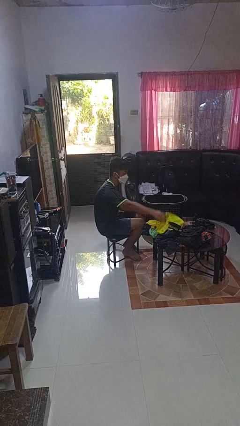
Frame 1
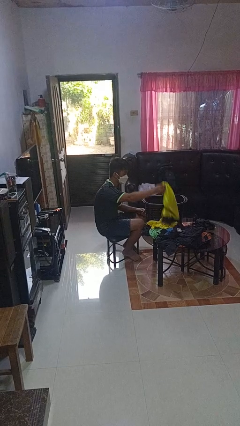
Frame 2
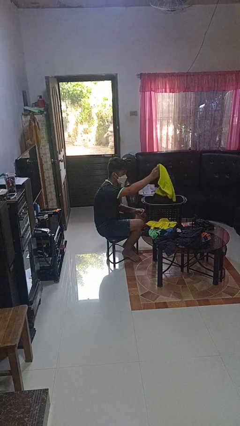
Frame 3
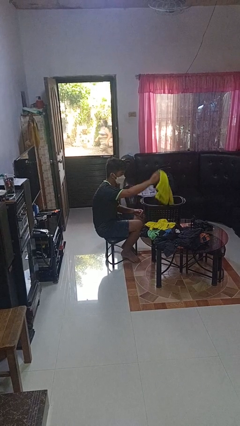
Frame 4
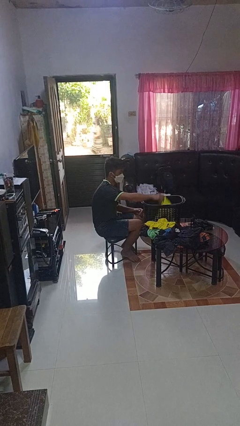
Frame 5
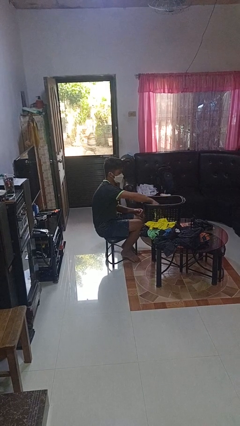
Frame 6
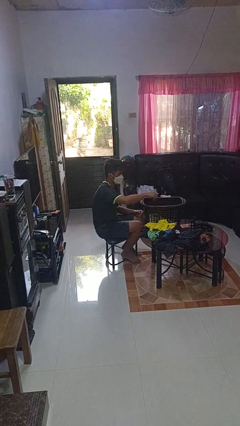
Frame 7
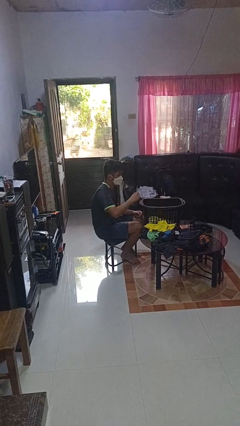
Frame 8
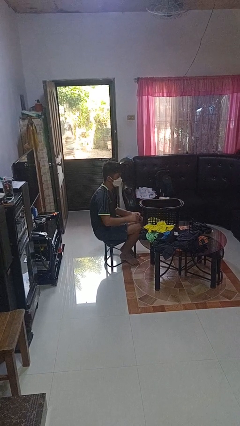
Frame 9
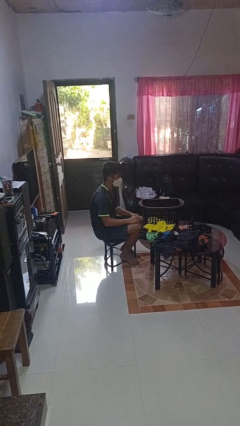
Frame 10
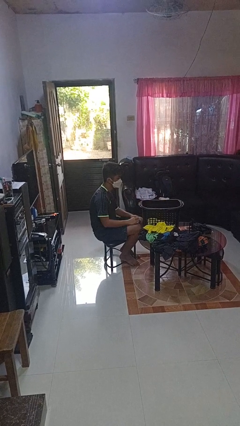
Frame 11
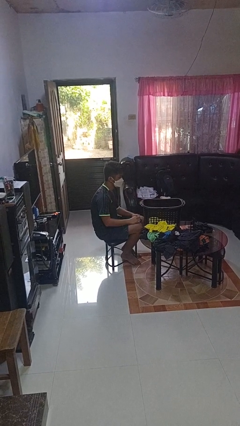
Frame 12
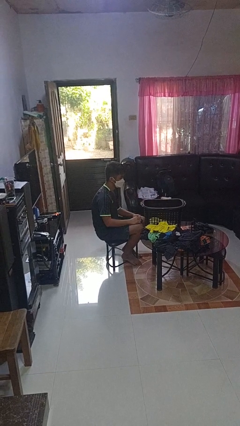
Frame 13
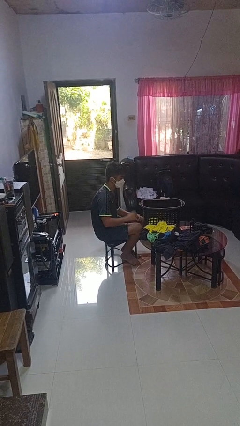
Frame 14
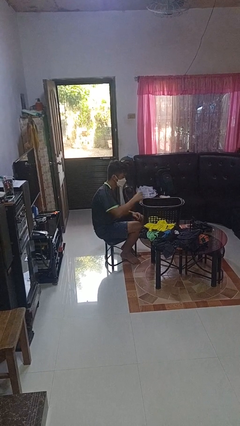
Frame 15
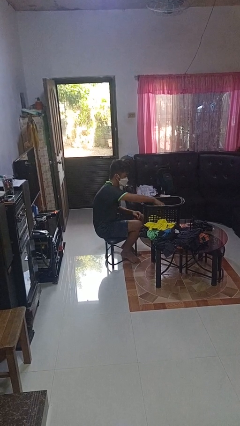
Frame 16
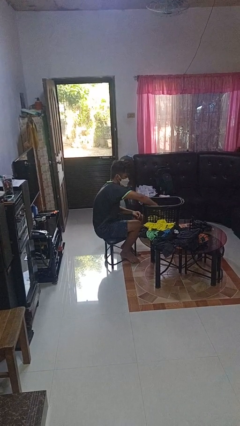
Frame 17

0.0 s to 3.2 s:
person puts object into basket

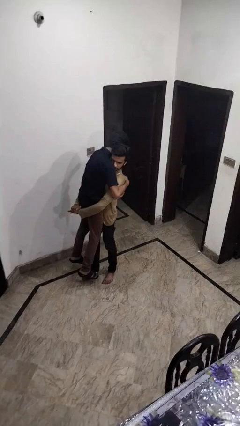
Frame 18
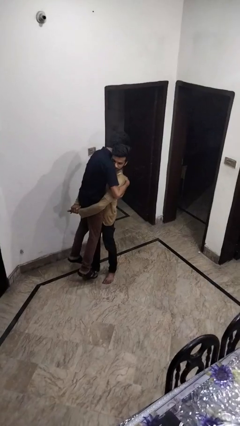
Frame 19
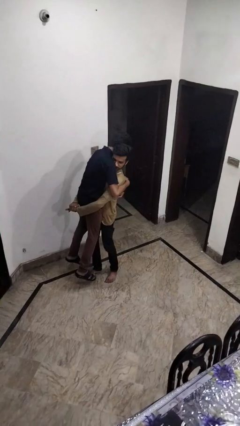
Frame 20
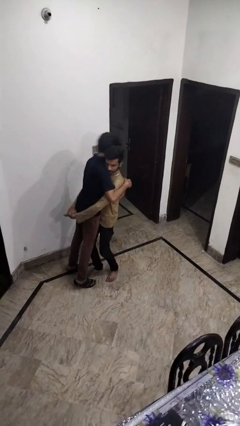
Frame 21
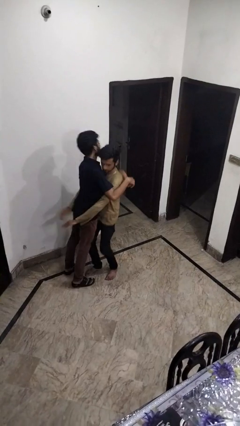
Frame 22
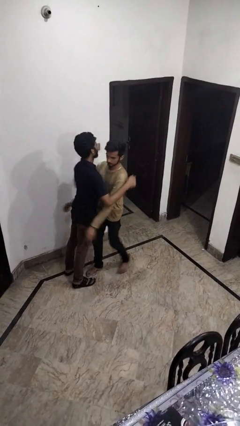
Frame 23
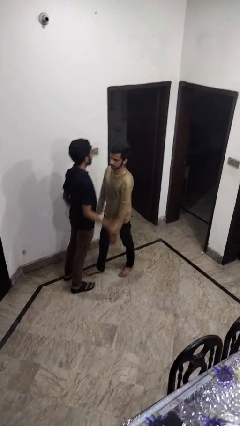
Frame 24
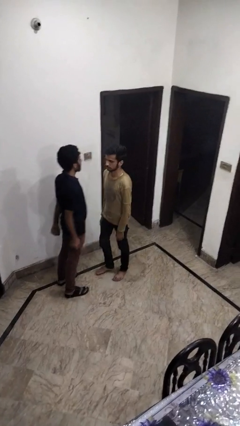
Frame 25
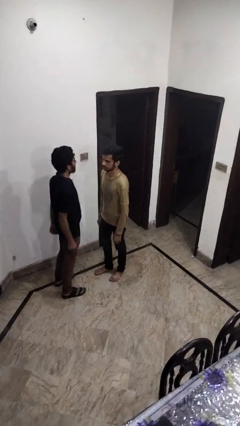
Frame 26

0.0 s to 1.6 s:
person puts down person

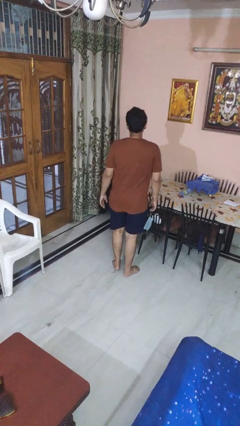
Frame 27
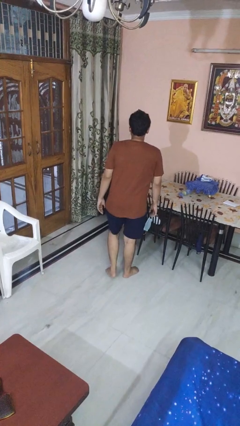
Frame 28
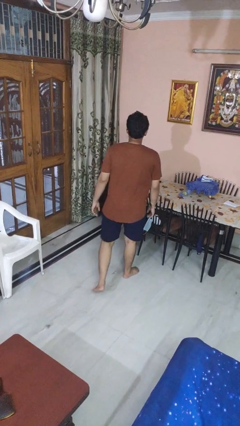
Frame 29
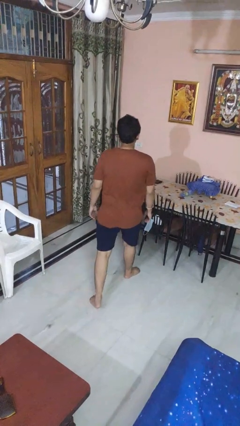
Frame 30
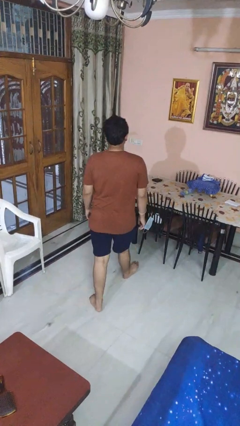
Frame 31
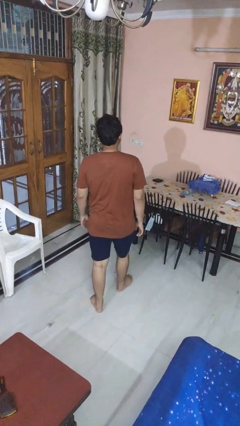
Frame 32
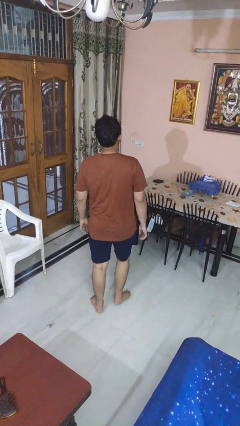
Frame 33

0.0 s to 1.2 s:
person walks tiptoe

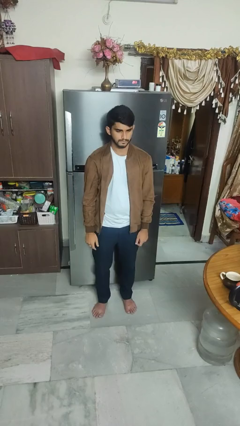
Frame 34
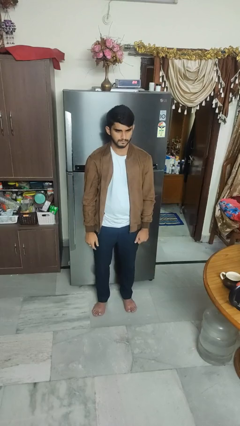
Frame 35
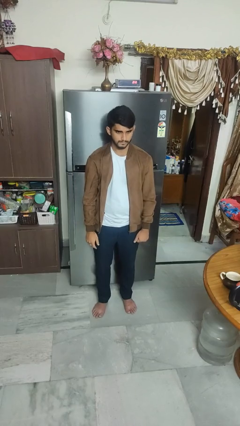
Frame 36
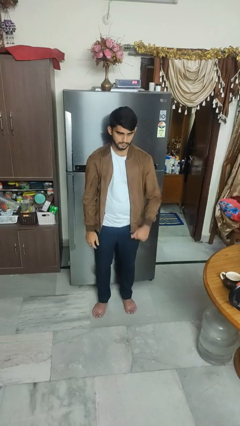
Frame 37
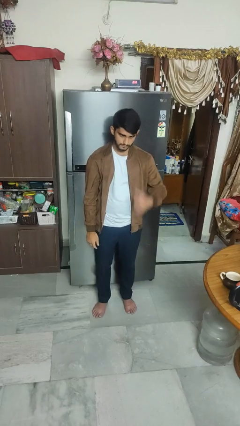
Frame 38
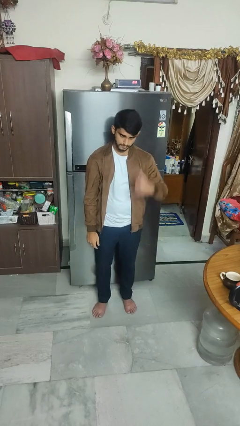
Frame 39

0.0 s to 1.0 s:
person gestures call me

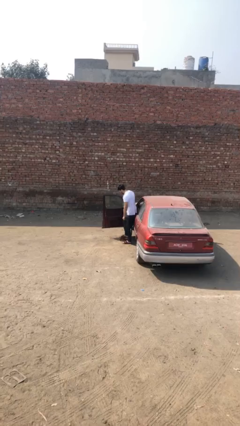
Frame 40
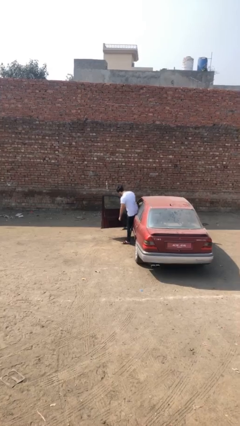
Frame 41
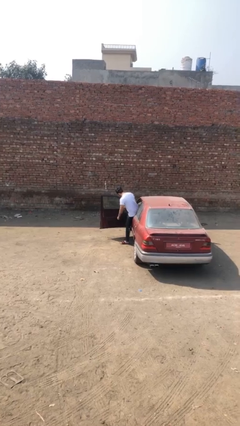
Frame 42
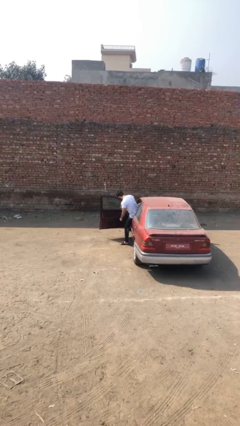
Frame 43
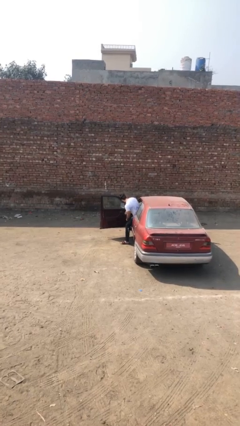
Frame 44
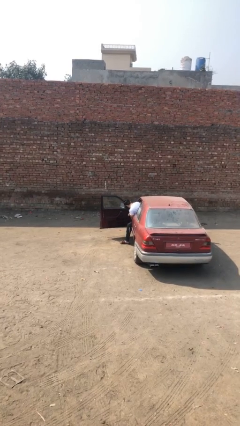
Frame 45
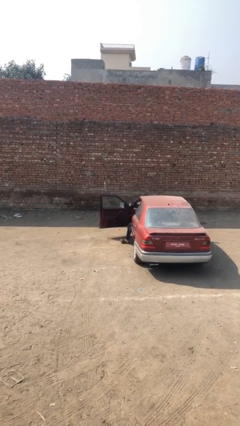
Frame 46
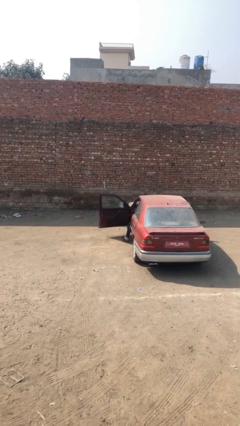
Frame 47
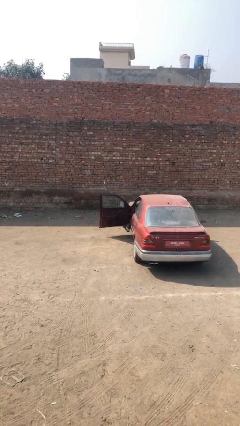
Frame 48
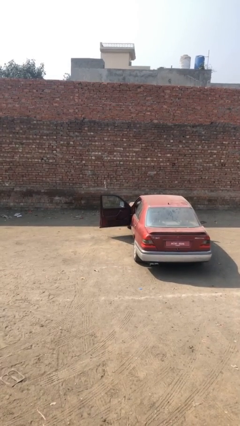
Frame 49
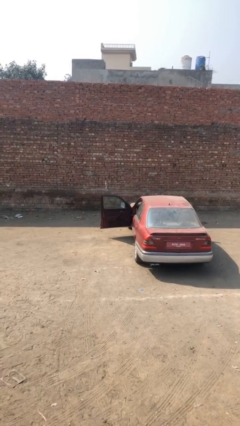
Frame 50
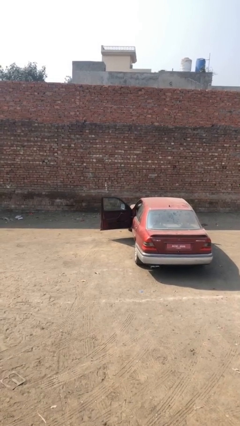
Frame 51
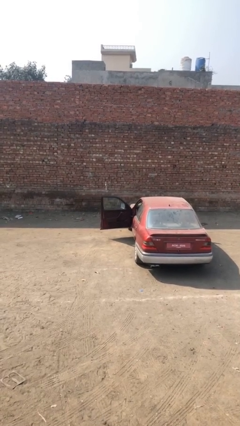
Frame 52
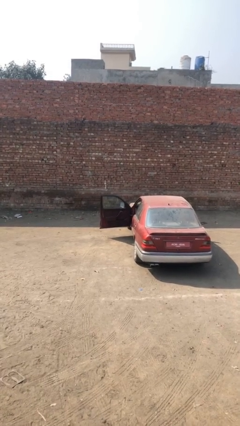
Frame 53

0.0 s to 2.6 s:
person enters car

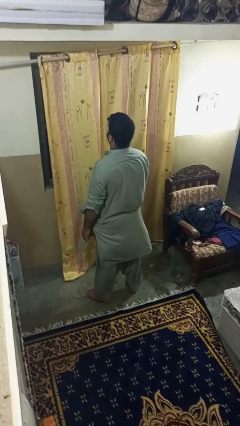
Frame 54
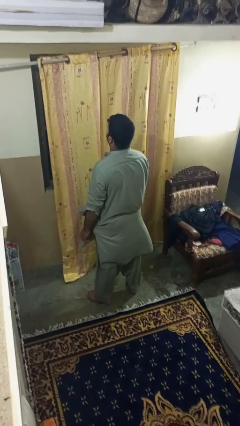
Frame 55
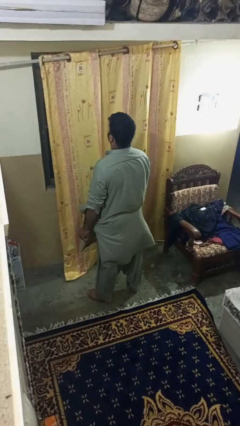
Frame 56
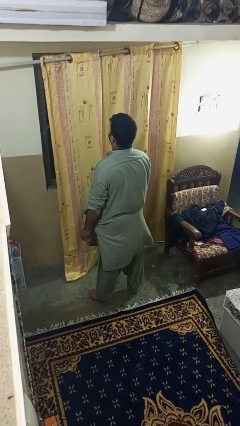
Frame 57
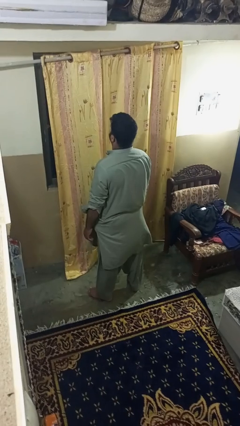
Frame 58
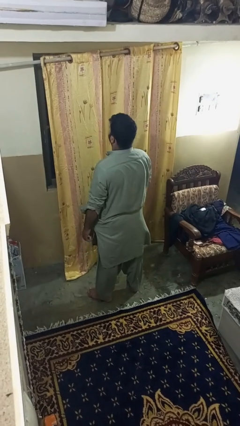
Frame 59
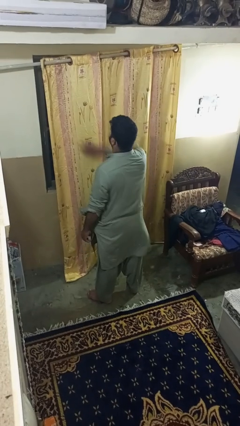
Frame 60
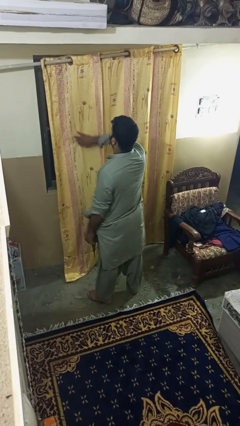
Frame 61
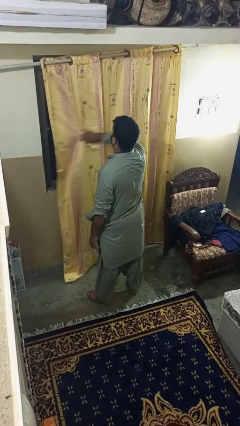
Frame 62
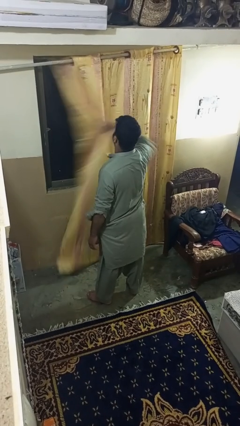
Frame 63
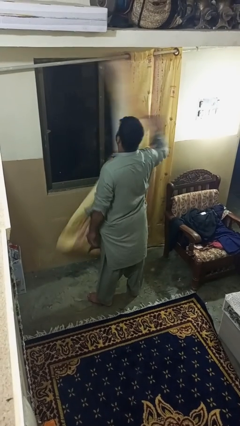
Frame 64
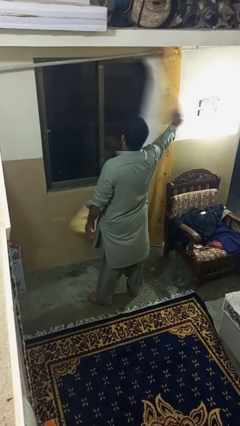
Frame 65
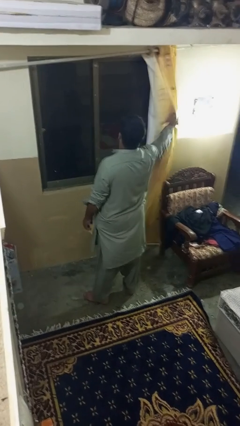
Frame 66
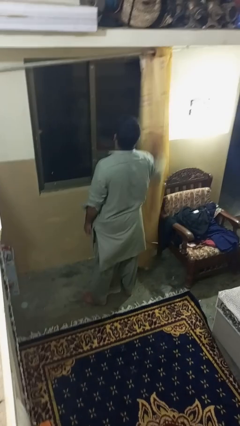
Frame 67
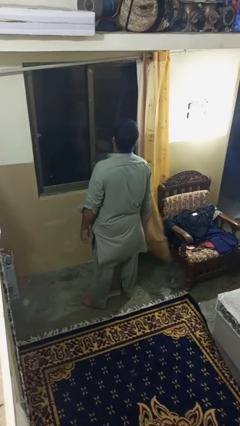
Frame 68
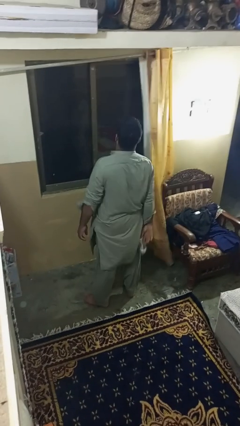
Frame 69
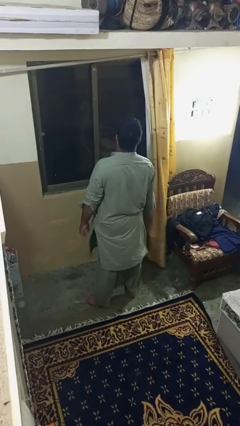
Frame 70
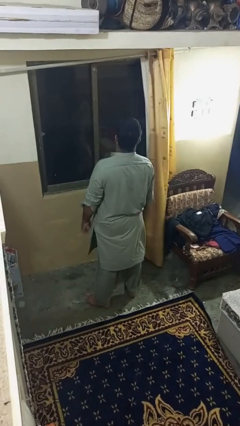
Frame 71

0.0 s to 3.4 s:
person opens curtains

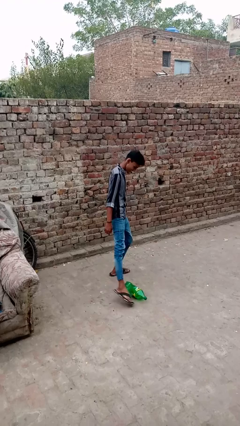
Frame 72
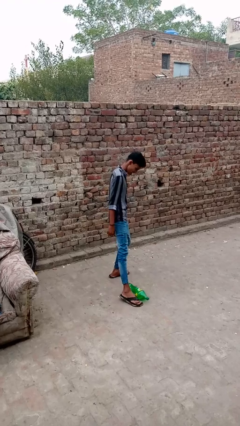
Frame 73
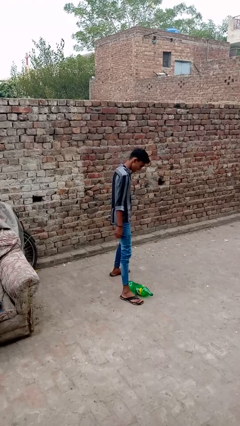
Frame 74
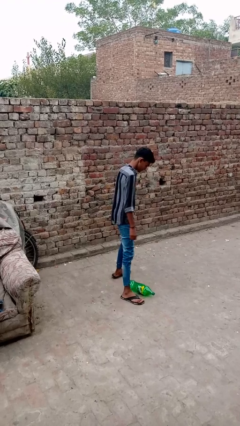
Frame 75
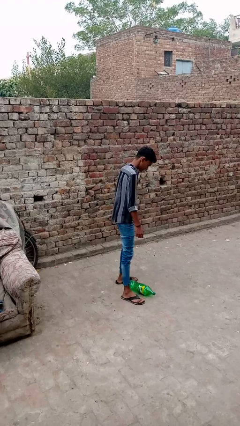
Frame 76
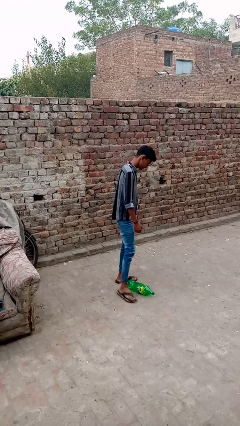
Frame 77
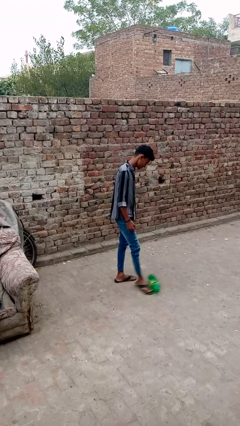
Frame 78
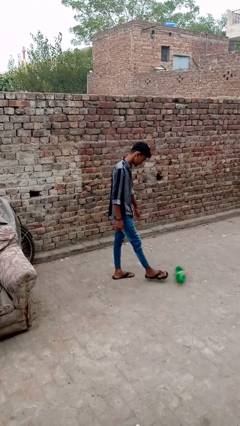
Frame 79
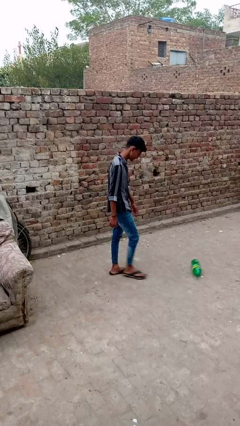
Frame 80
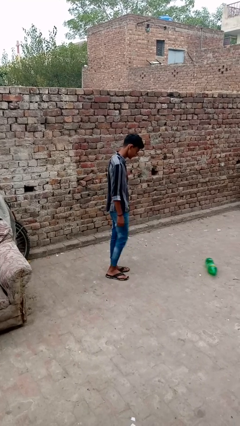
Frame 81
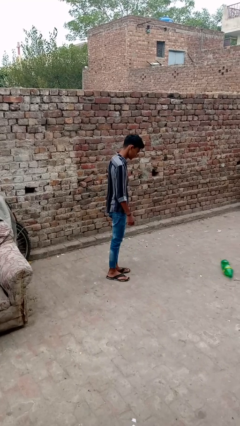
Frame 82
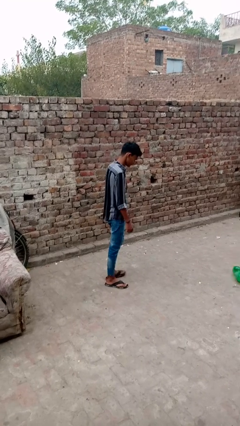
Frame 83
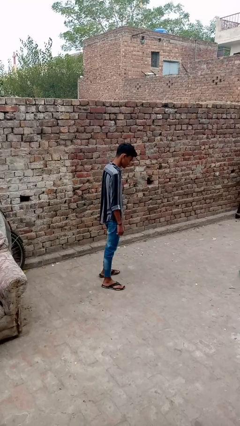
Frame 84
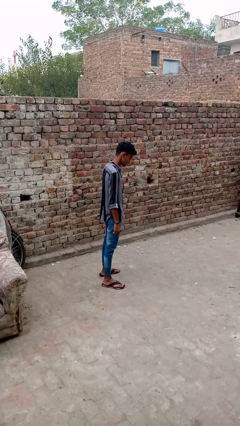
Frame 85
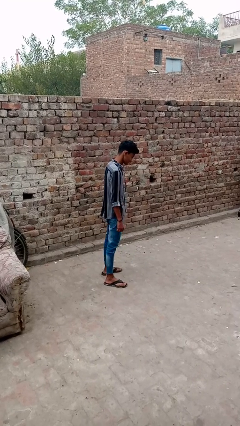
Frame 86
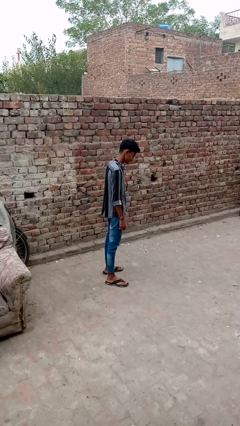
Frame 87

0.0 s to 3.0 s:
person kicks object to person

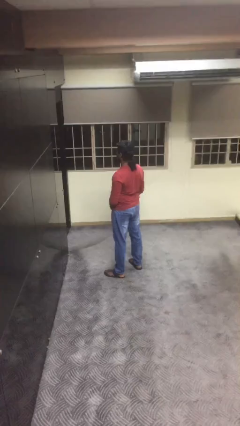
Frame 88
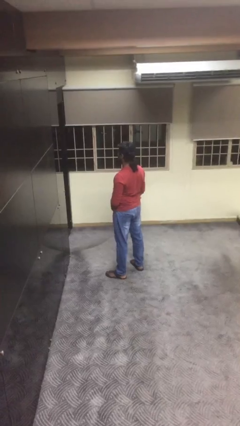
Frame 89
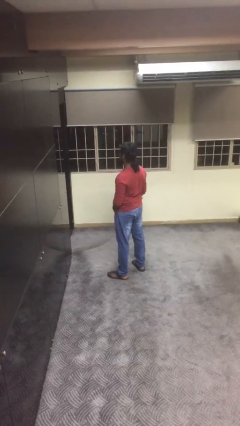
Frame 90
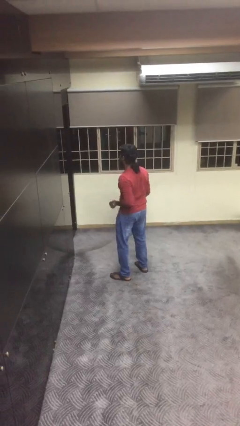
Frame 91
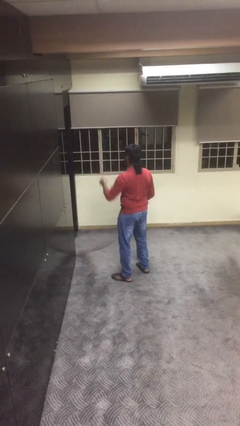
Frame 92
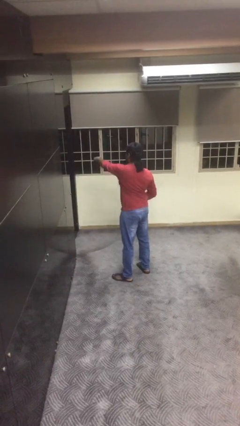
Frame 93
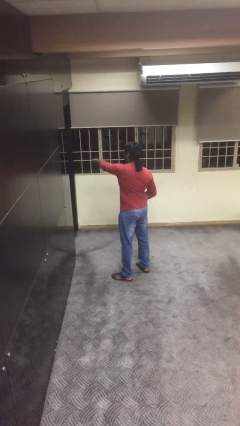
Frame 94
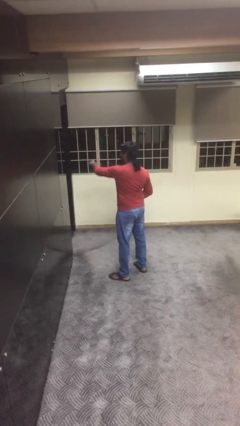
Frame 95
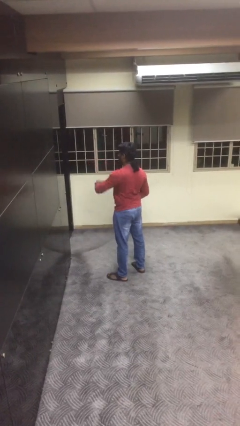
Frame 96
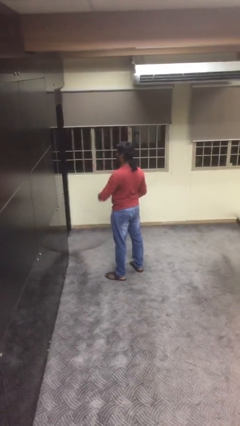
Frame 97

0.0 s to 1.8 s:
person punches
